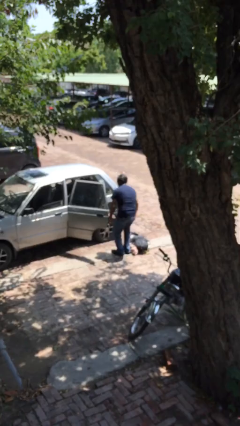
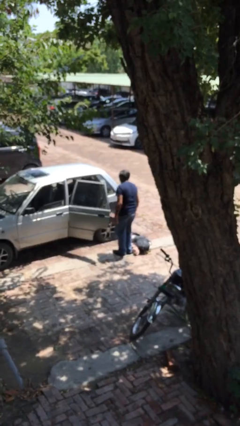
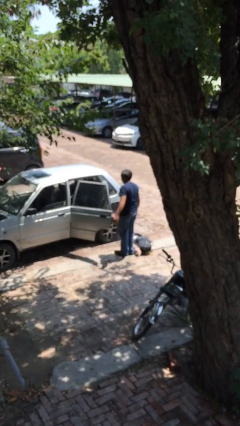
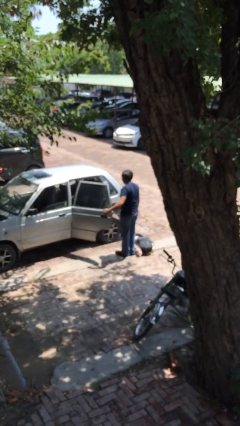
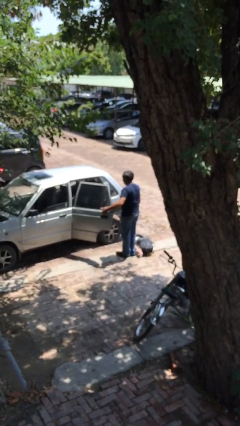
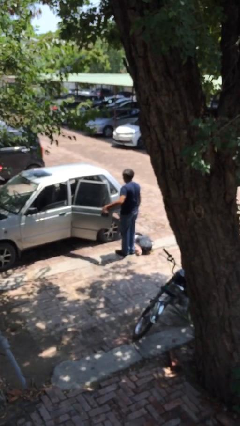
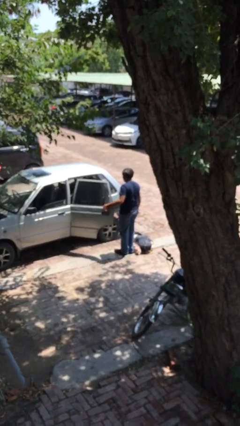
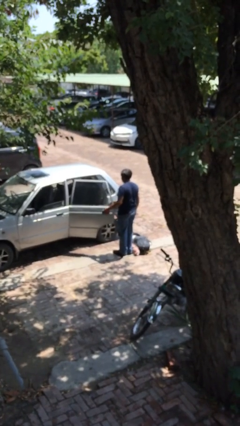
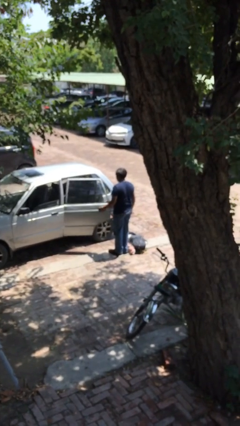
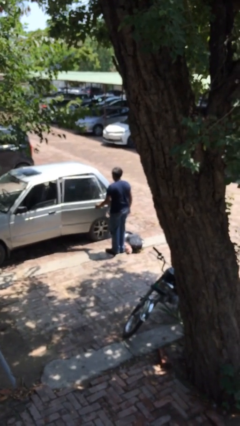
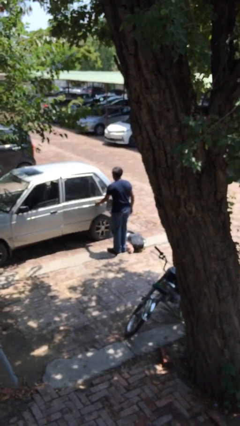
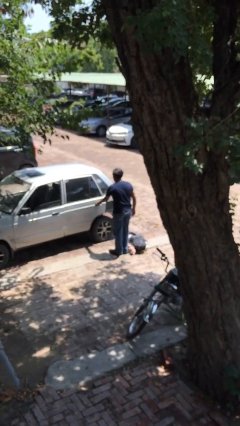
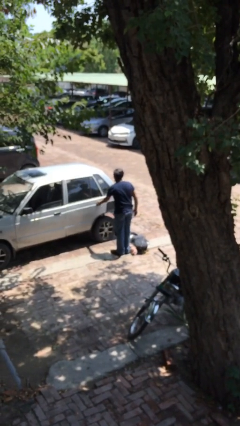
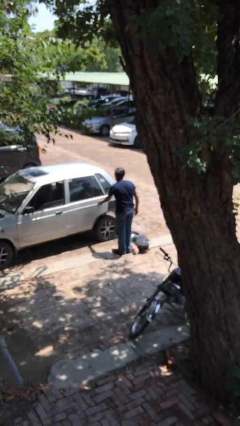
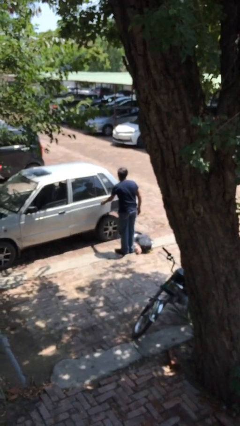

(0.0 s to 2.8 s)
person closes car door

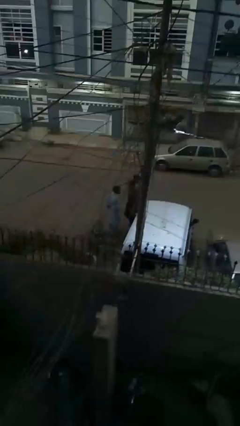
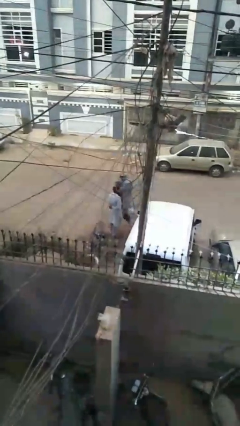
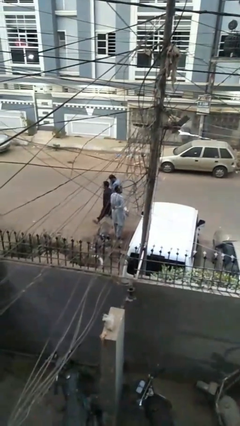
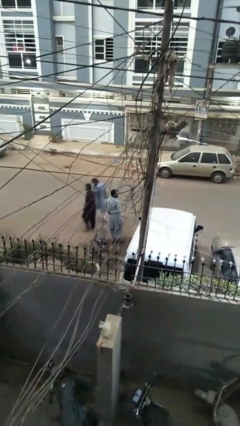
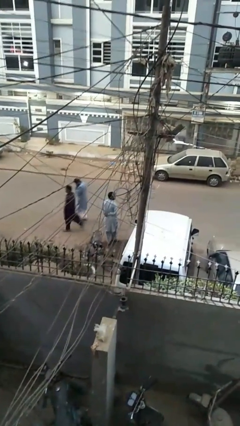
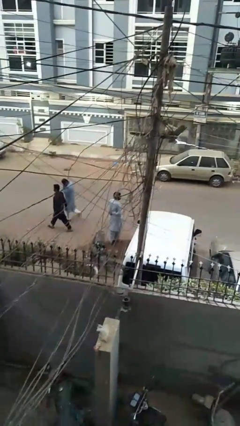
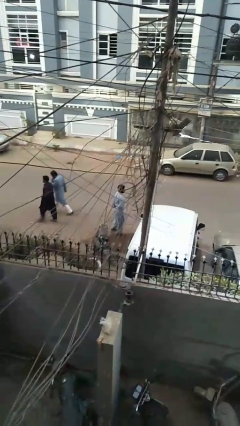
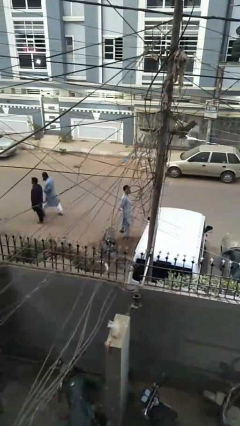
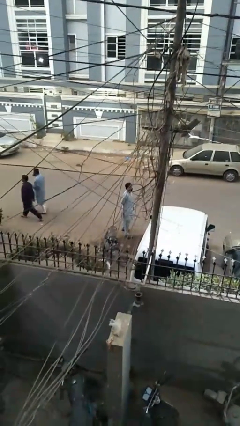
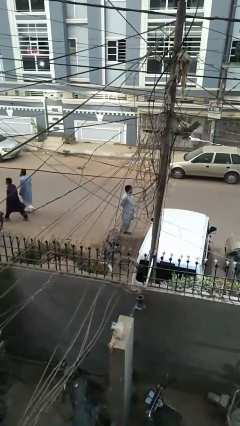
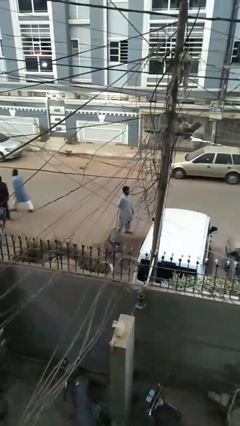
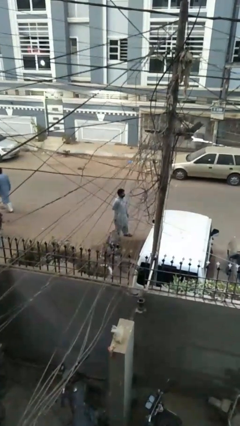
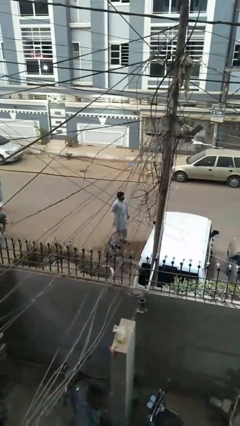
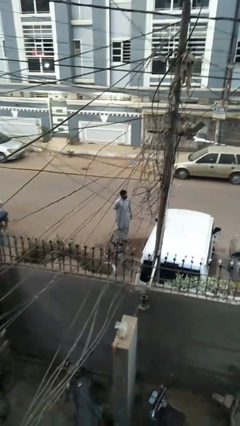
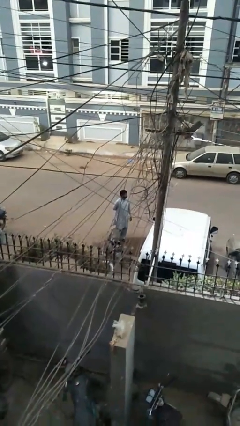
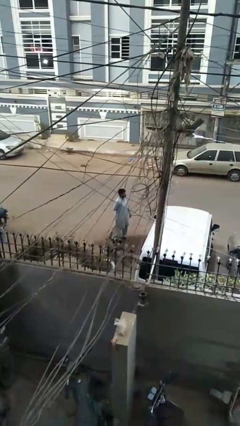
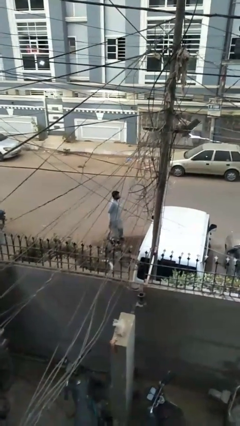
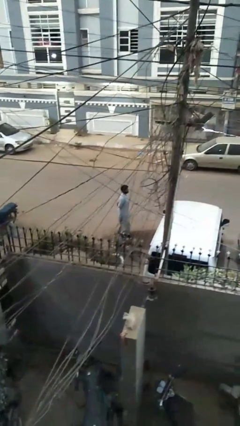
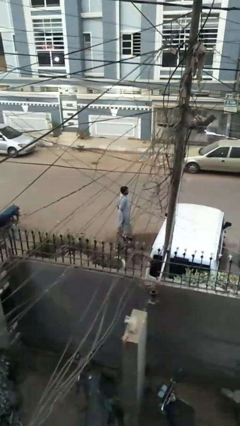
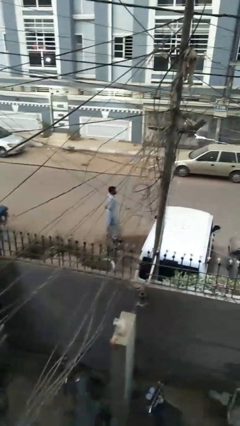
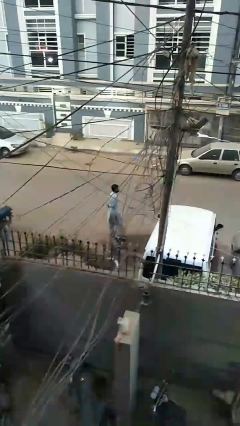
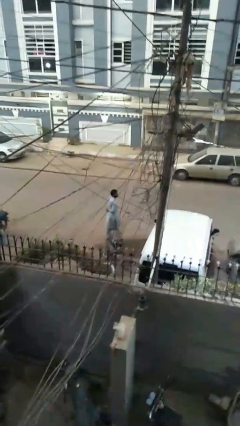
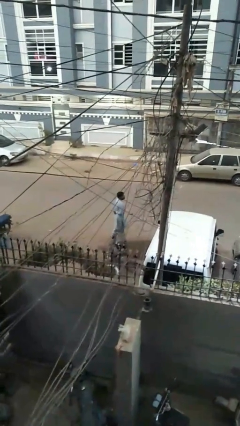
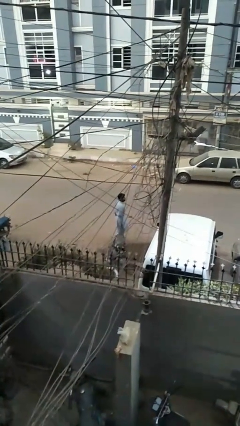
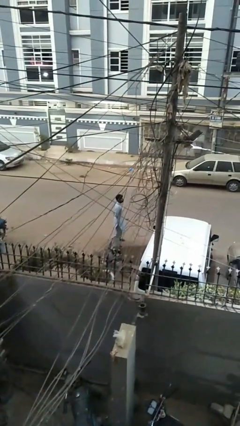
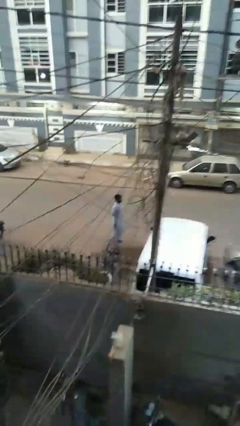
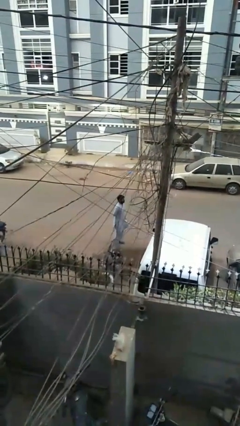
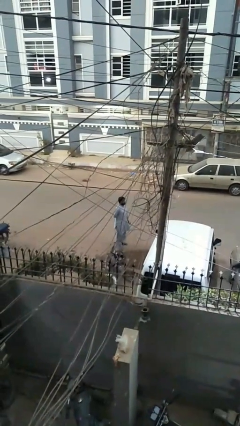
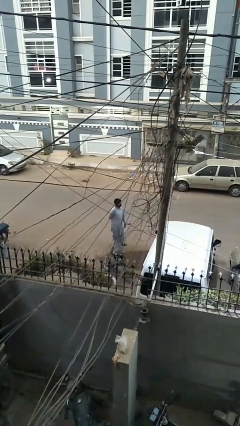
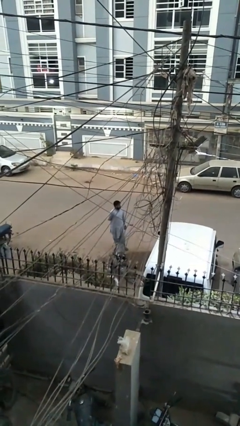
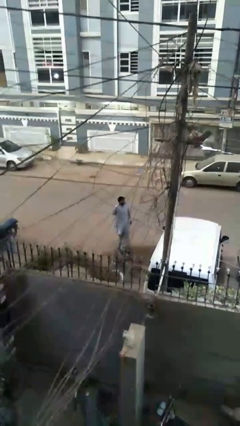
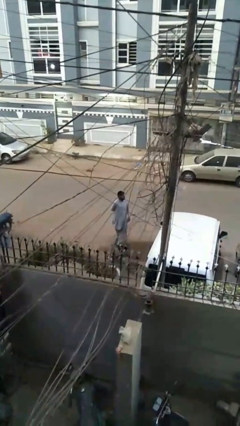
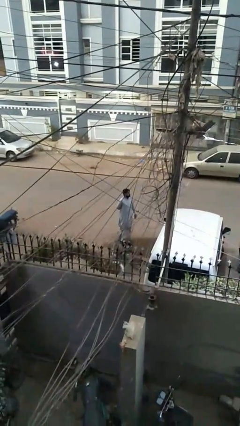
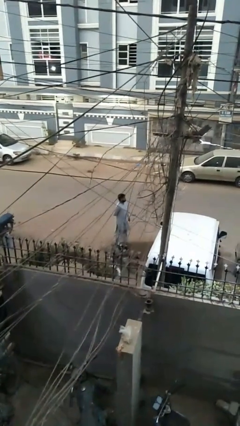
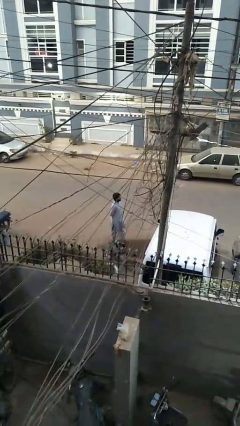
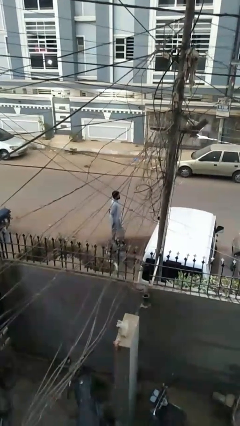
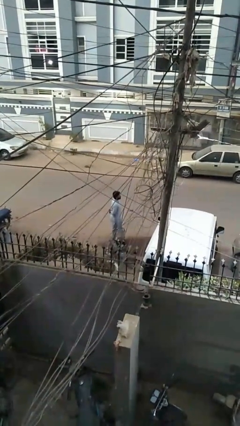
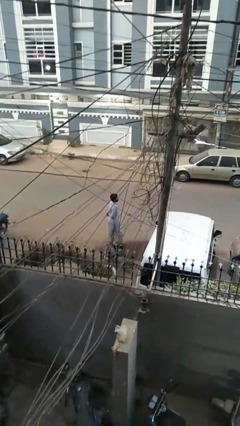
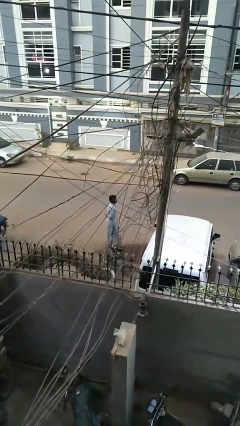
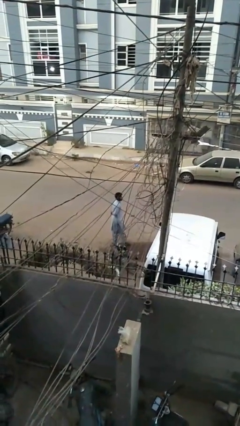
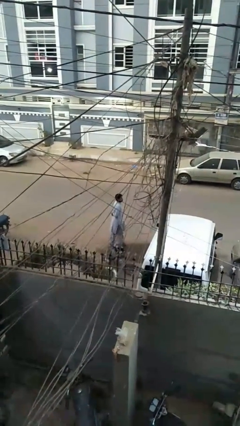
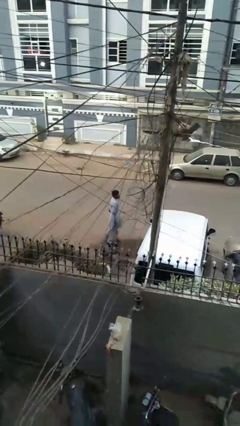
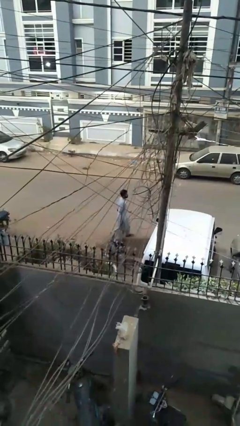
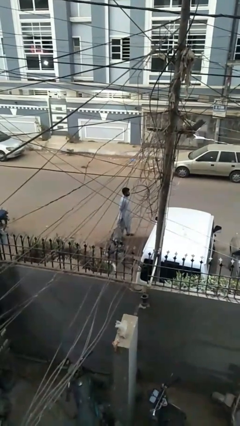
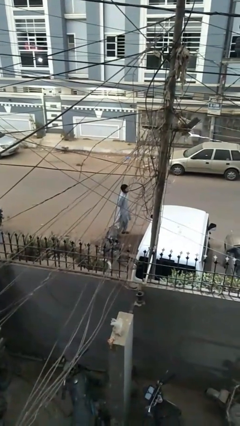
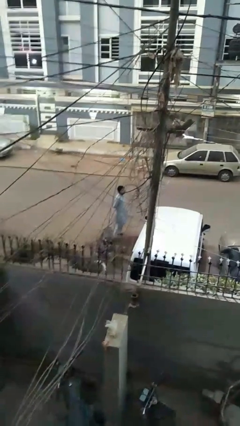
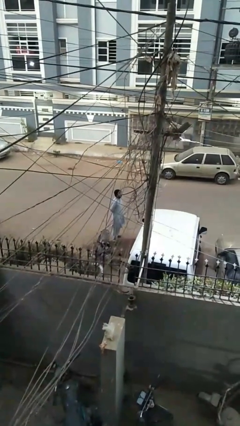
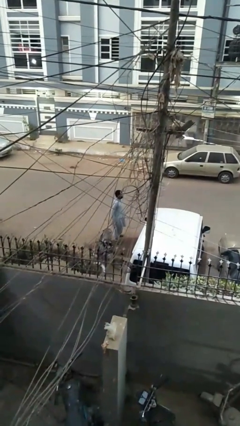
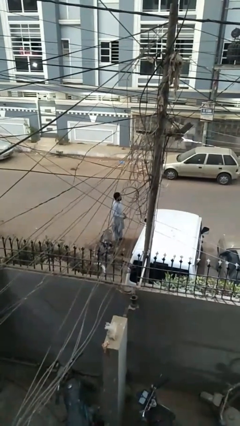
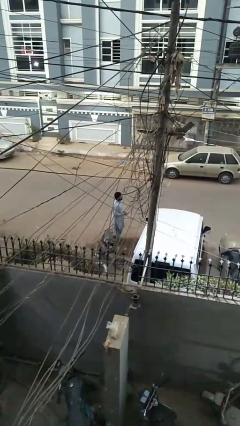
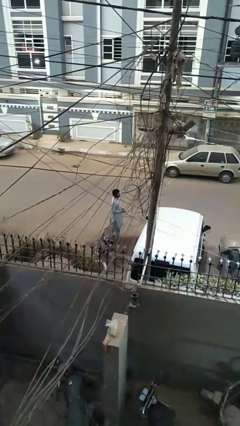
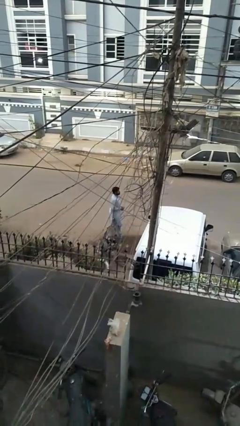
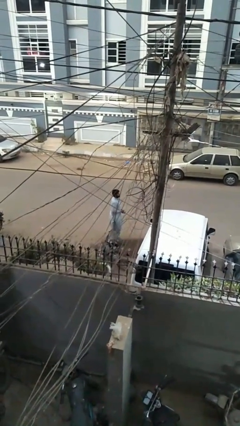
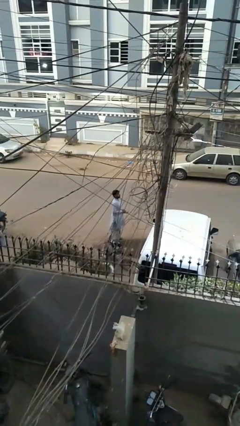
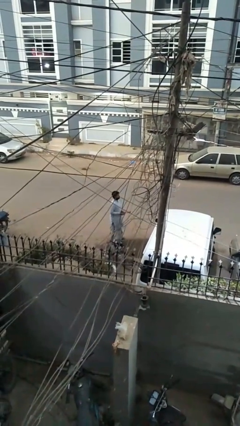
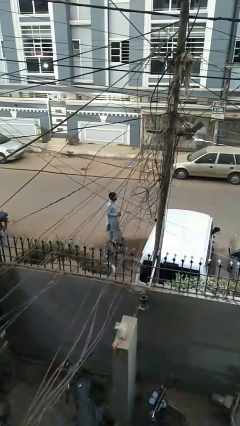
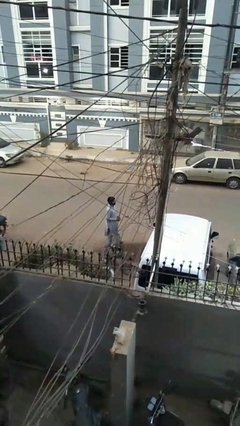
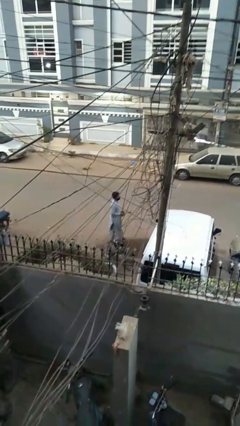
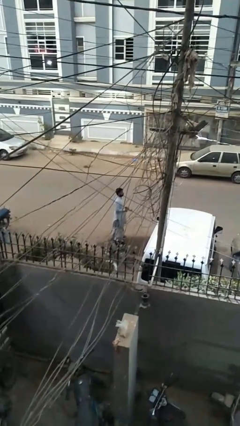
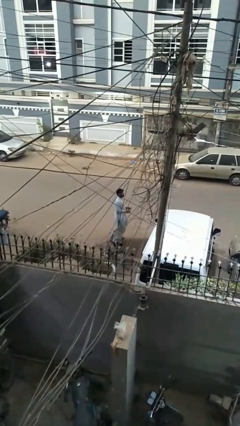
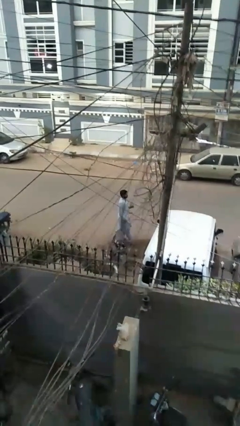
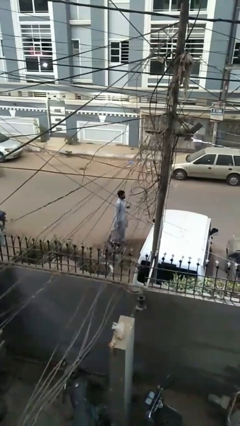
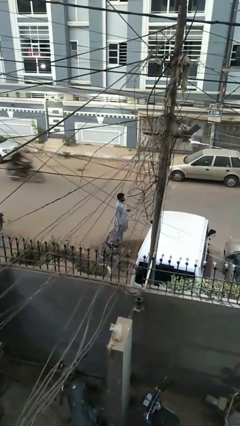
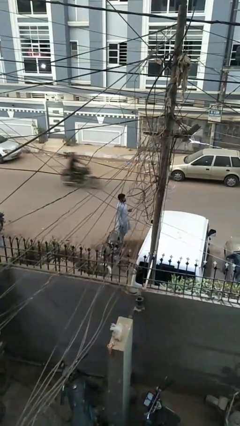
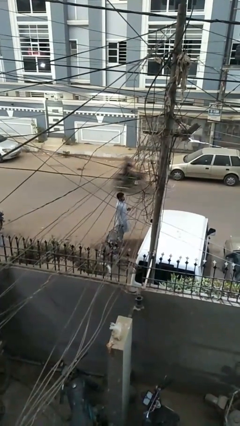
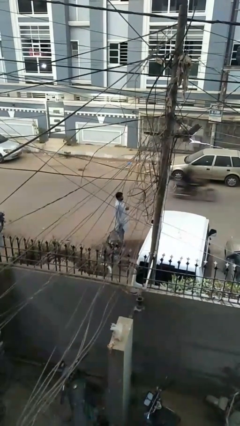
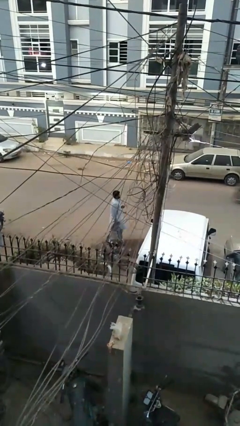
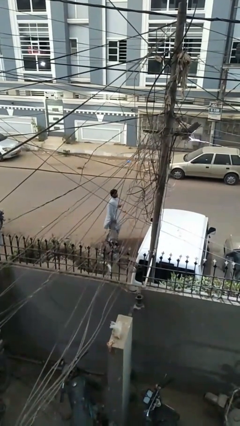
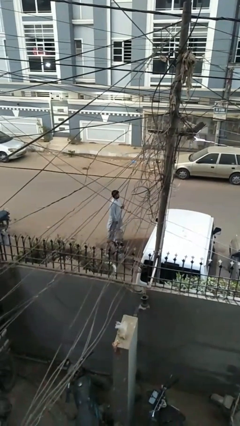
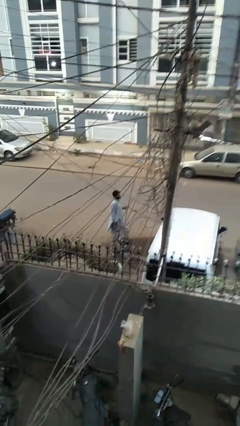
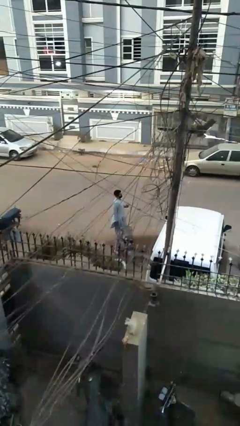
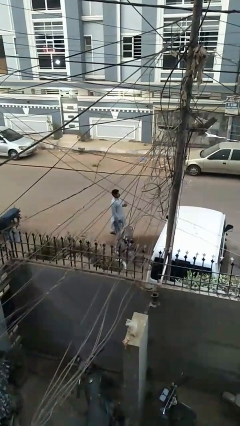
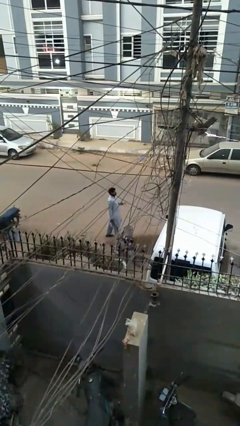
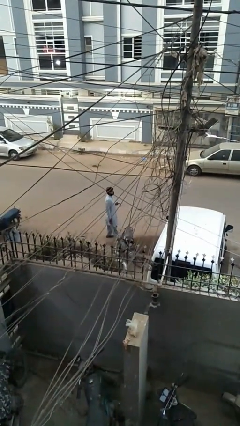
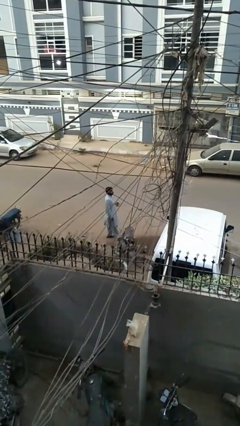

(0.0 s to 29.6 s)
person walks

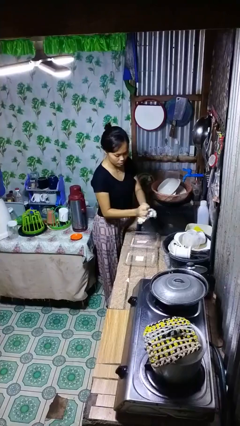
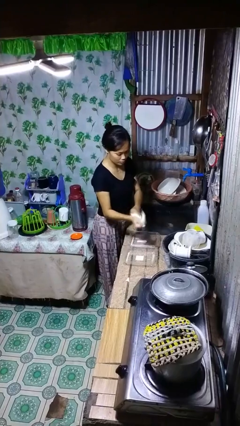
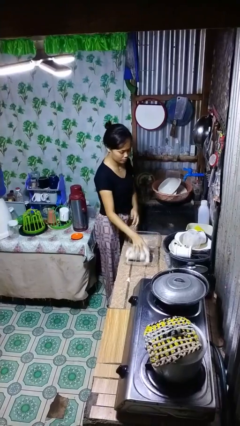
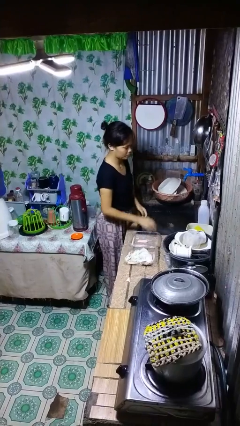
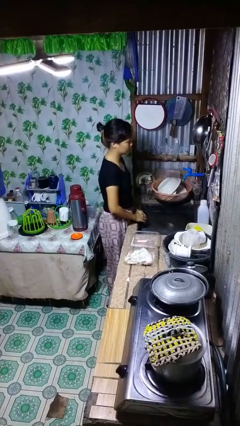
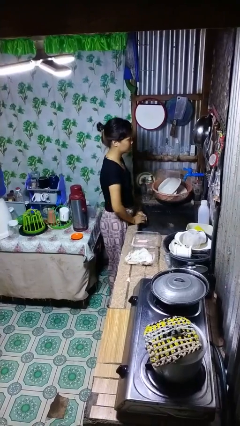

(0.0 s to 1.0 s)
person dries hands with towel
